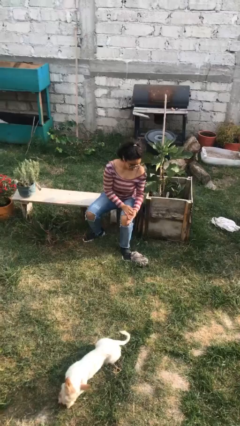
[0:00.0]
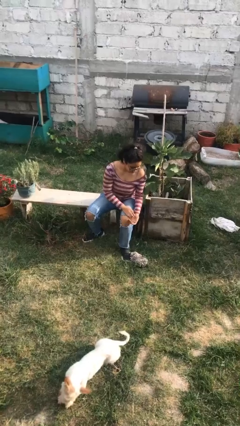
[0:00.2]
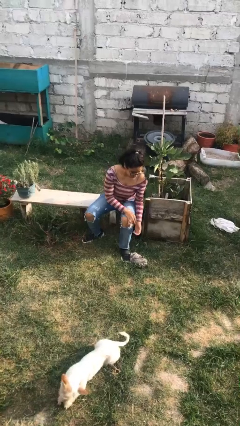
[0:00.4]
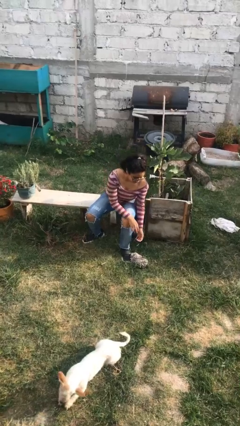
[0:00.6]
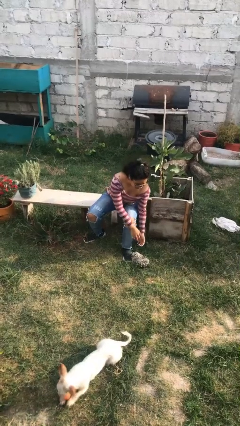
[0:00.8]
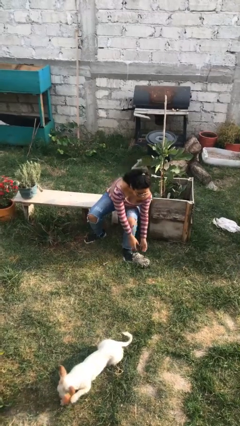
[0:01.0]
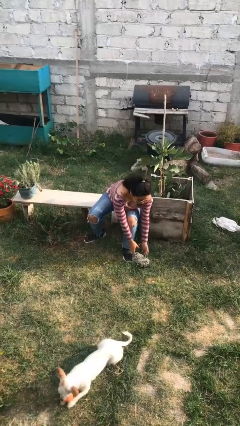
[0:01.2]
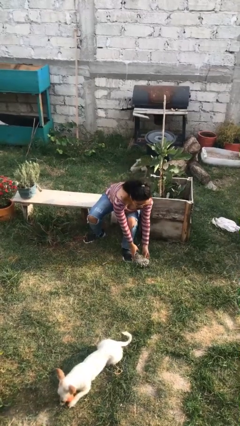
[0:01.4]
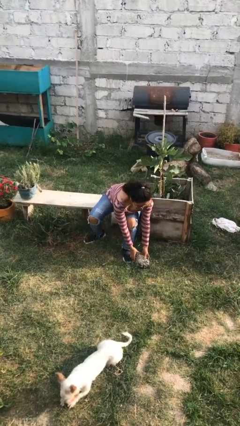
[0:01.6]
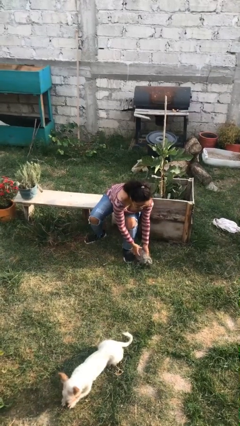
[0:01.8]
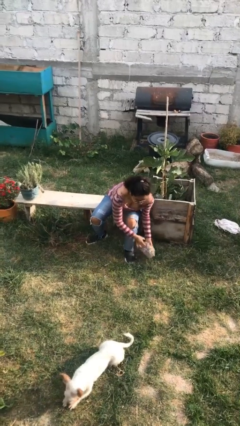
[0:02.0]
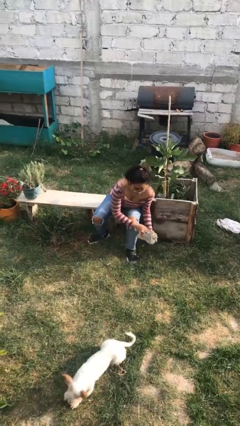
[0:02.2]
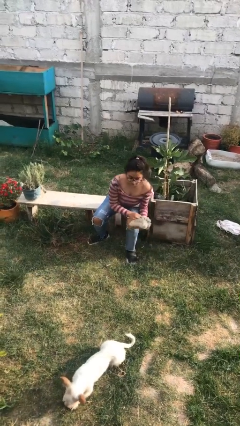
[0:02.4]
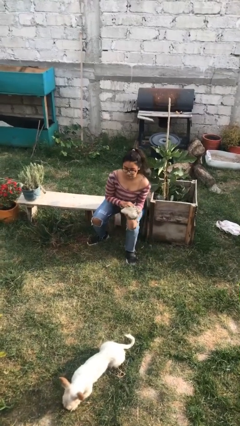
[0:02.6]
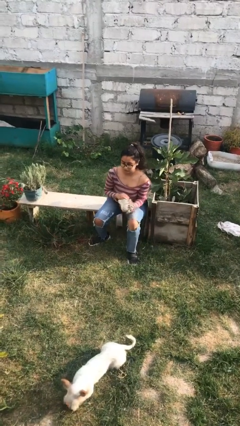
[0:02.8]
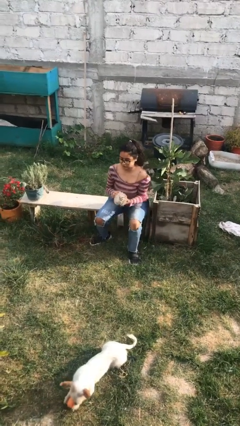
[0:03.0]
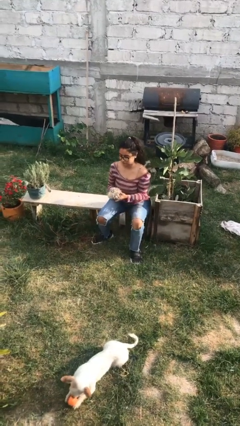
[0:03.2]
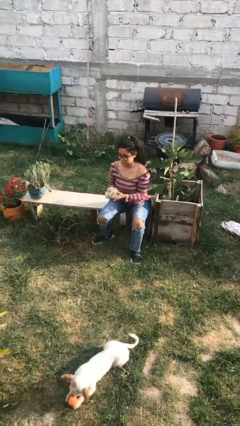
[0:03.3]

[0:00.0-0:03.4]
person picks up object from floor

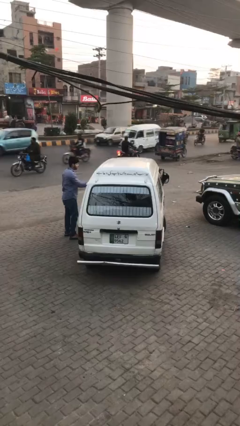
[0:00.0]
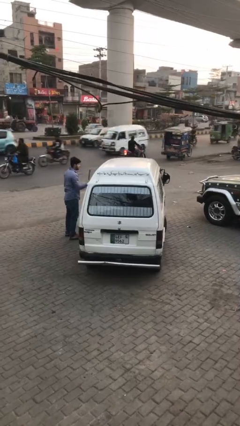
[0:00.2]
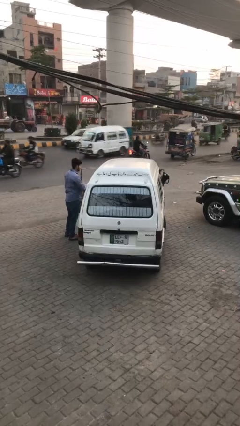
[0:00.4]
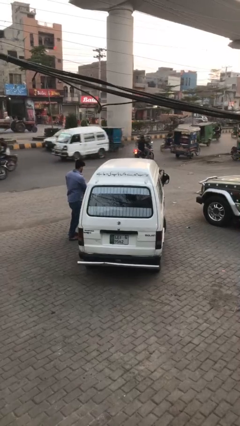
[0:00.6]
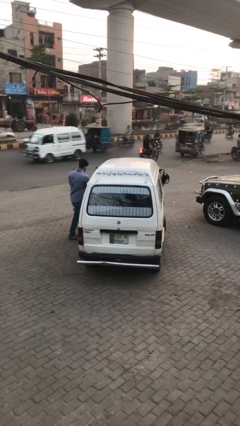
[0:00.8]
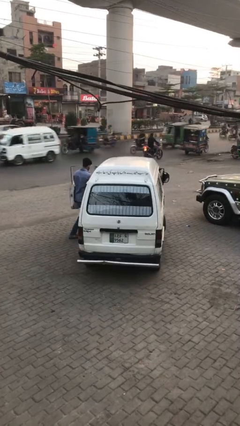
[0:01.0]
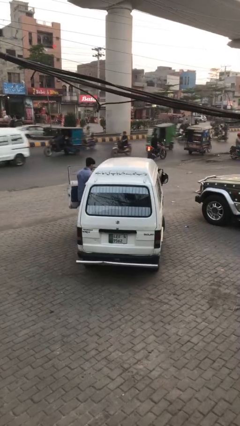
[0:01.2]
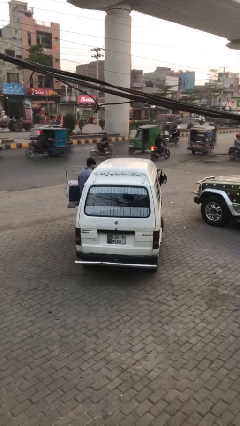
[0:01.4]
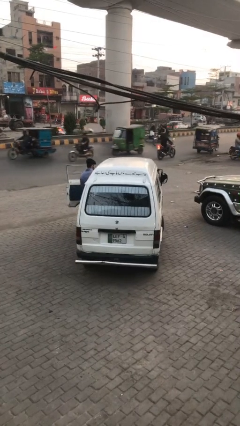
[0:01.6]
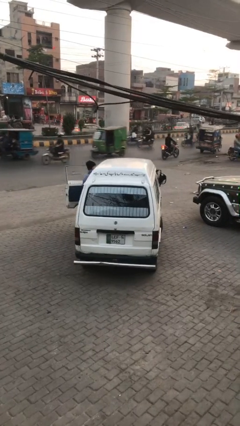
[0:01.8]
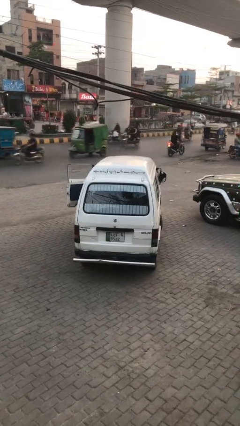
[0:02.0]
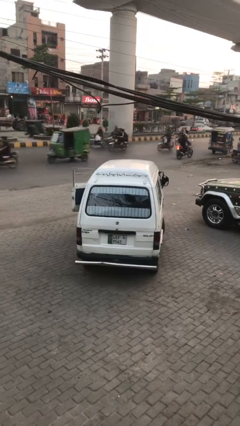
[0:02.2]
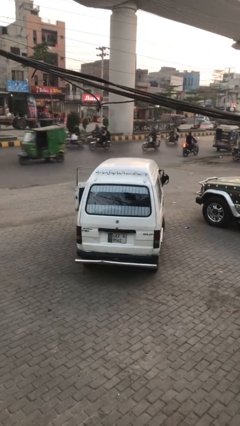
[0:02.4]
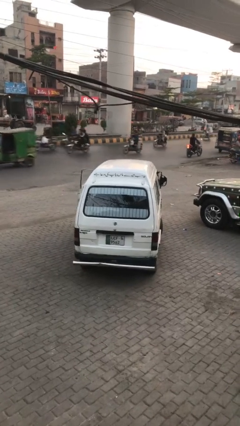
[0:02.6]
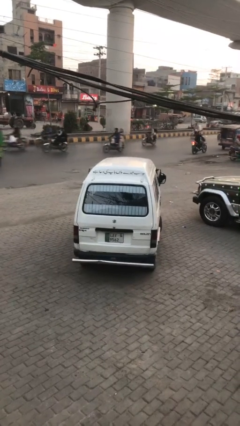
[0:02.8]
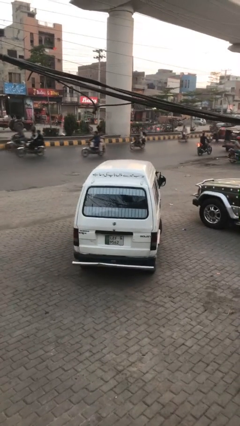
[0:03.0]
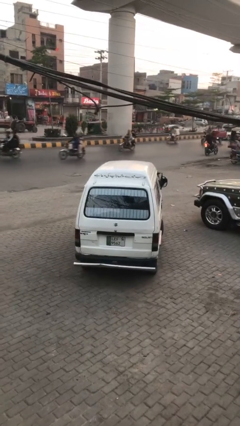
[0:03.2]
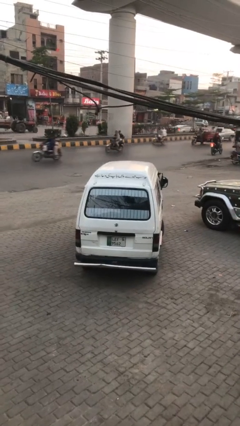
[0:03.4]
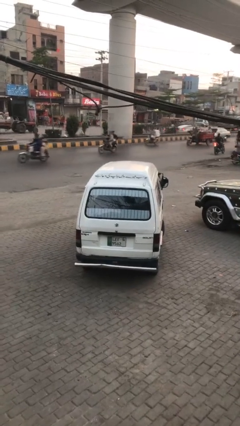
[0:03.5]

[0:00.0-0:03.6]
car picks up person

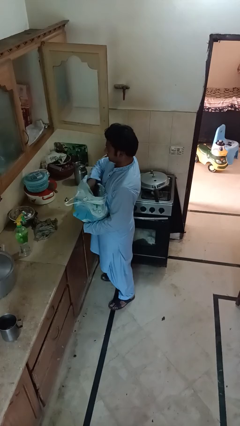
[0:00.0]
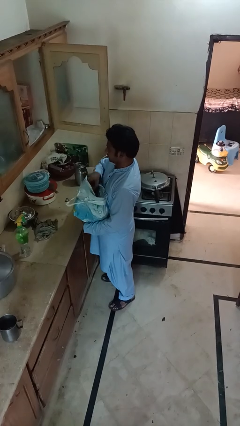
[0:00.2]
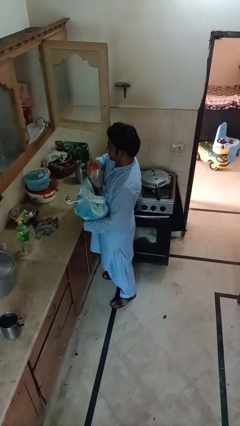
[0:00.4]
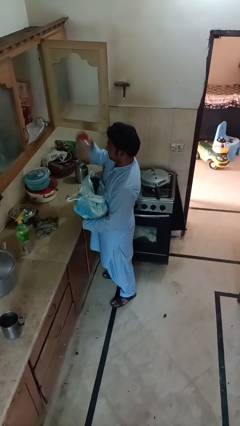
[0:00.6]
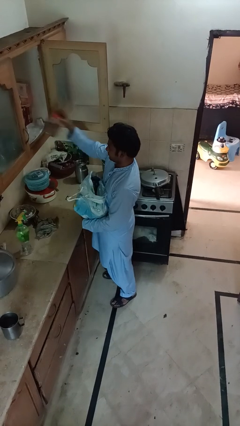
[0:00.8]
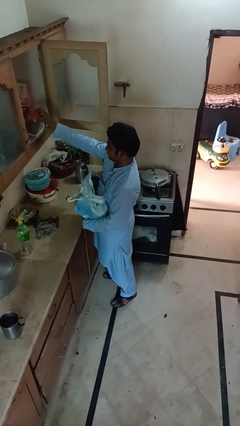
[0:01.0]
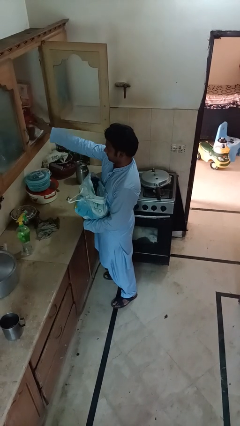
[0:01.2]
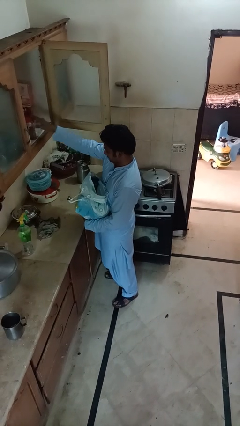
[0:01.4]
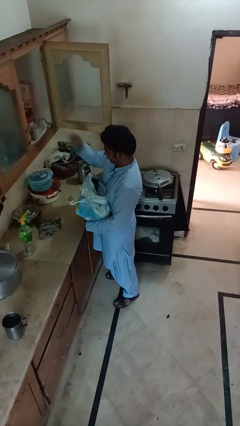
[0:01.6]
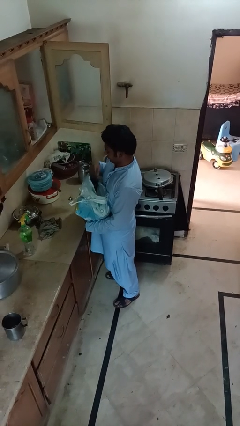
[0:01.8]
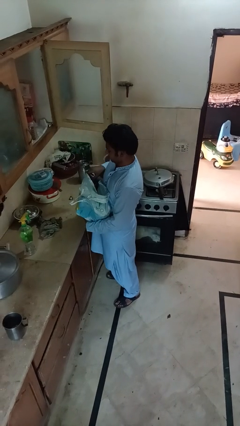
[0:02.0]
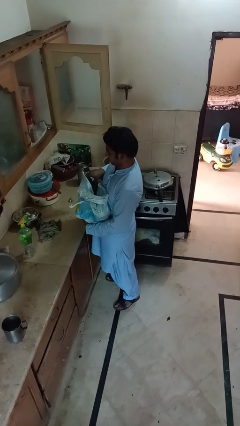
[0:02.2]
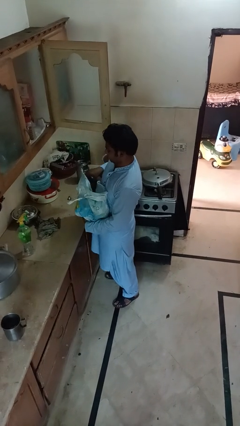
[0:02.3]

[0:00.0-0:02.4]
person loads groceries into cabinet

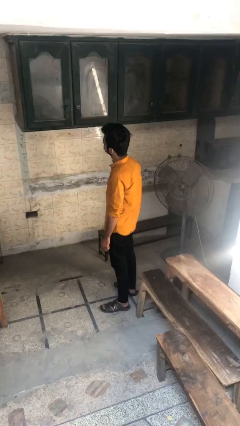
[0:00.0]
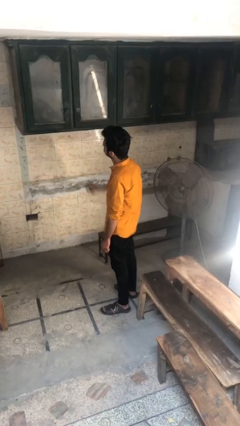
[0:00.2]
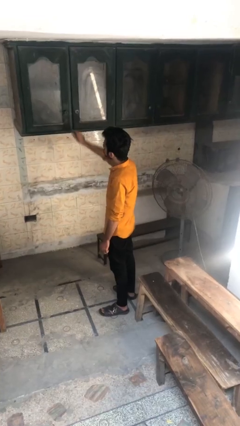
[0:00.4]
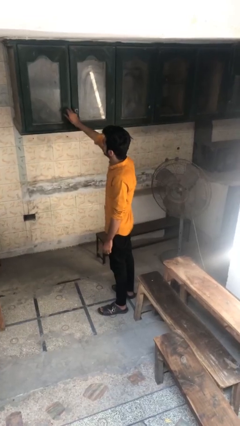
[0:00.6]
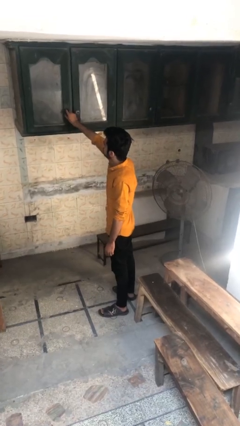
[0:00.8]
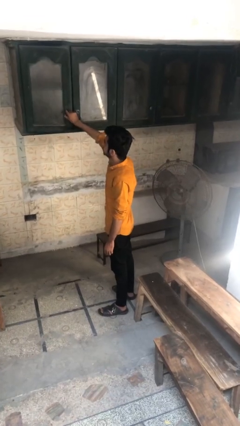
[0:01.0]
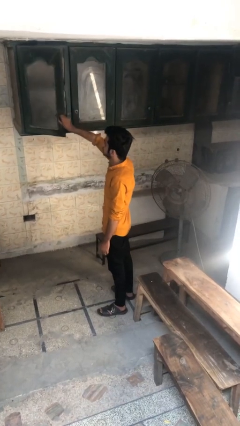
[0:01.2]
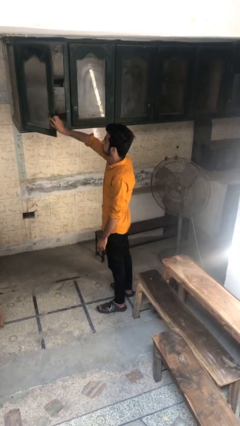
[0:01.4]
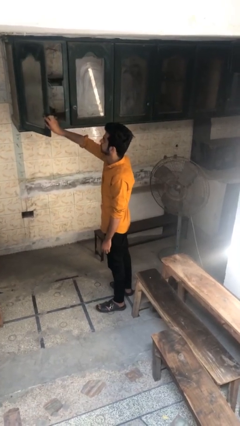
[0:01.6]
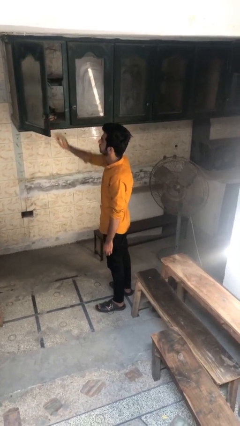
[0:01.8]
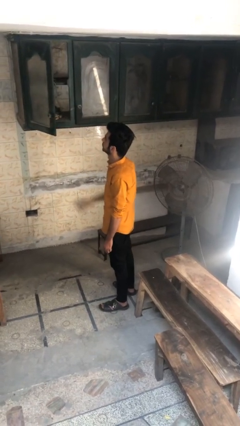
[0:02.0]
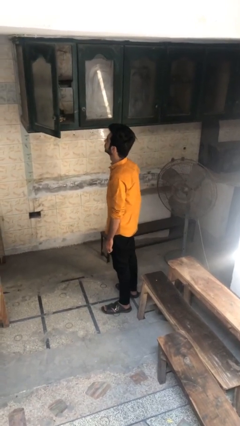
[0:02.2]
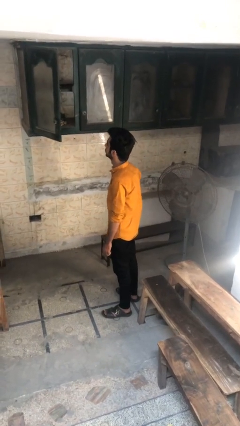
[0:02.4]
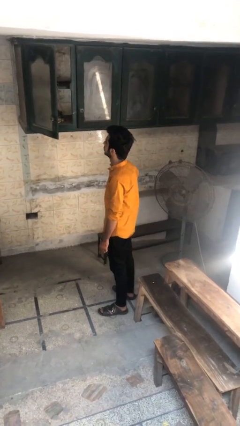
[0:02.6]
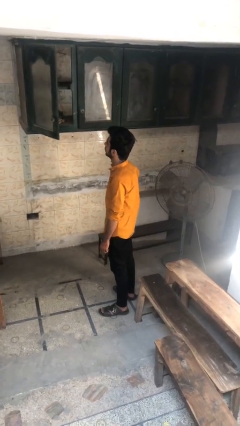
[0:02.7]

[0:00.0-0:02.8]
person opens cabinet

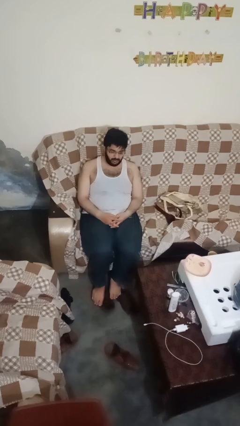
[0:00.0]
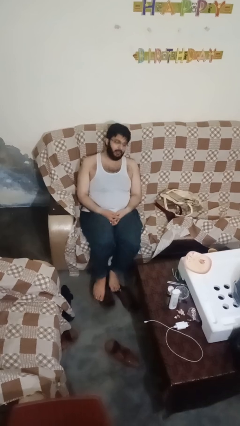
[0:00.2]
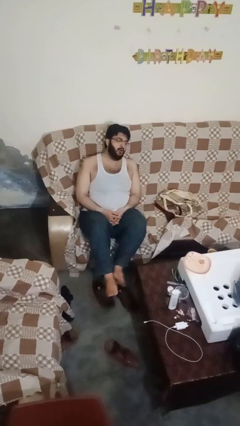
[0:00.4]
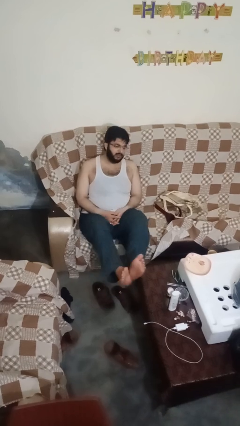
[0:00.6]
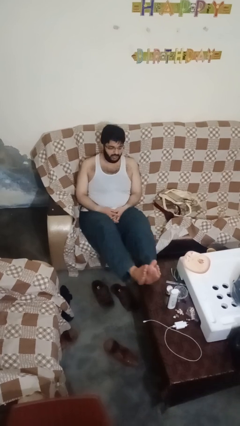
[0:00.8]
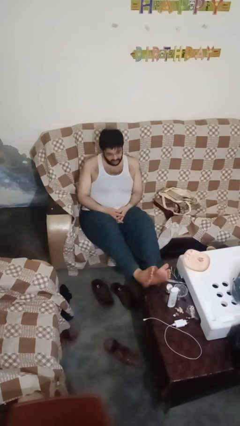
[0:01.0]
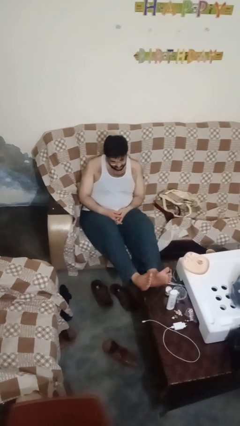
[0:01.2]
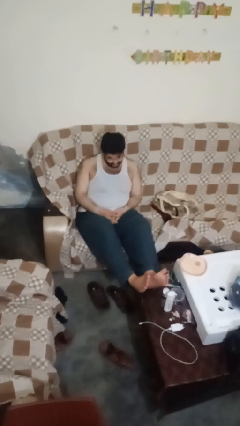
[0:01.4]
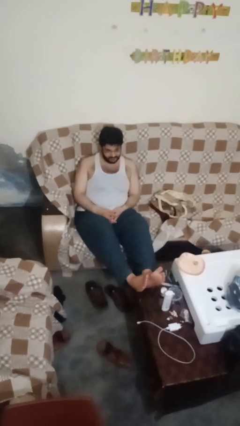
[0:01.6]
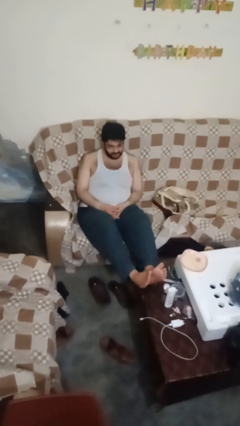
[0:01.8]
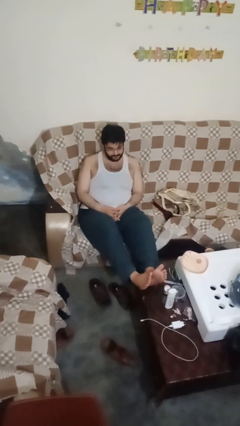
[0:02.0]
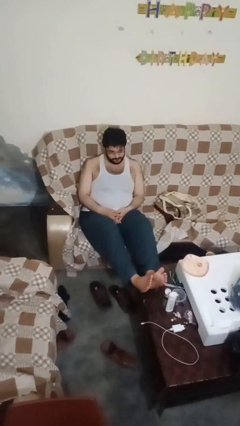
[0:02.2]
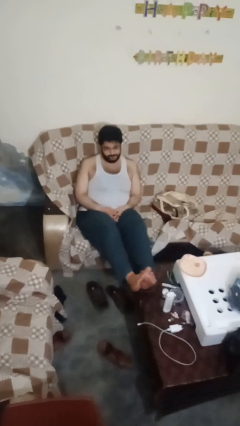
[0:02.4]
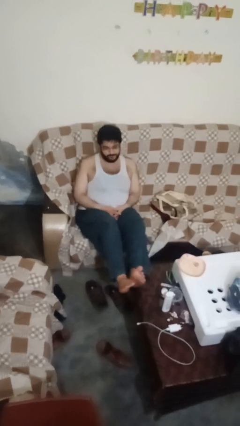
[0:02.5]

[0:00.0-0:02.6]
person puts feet up

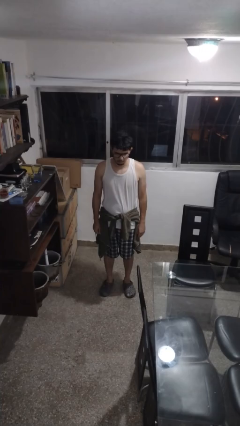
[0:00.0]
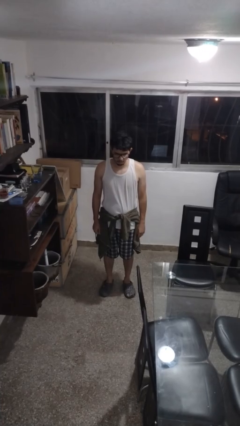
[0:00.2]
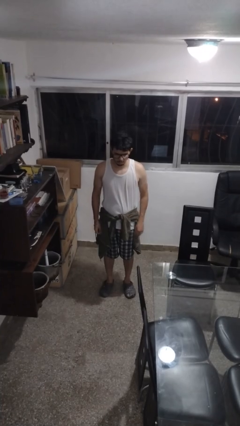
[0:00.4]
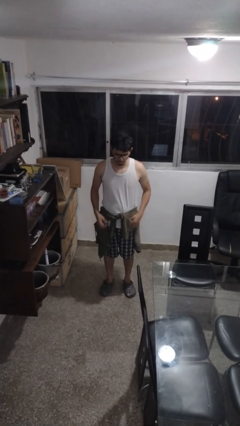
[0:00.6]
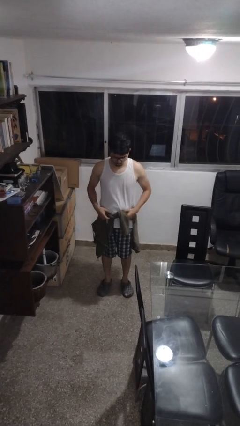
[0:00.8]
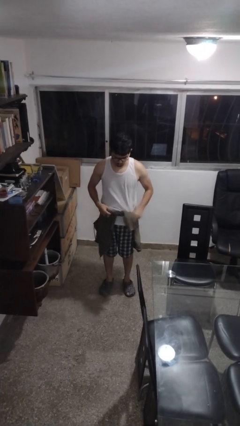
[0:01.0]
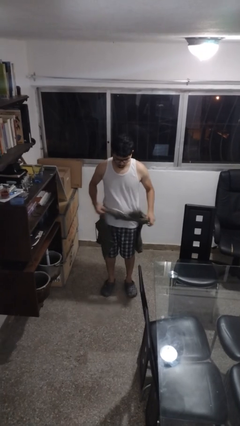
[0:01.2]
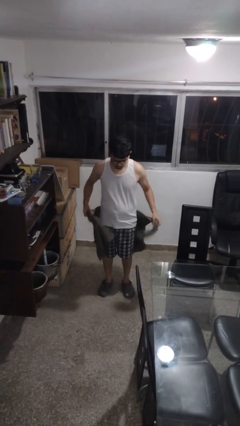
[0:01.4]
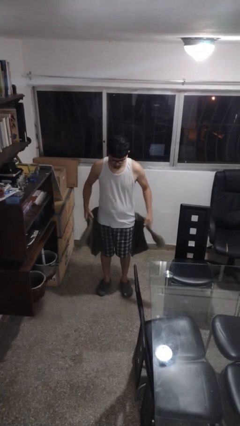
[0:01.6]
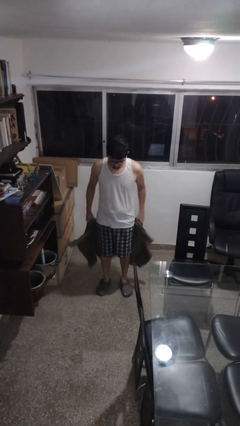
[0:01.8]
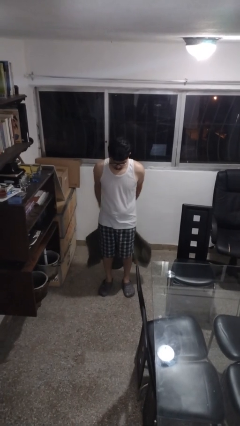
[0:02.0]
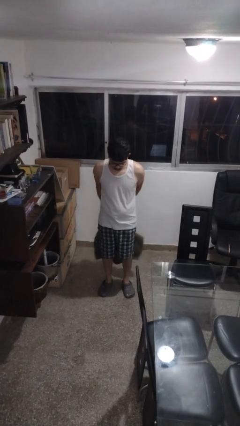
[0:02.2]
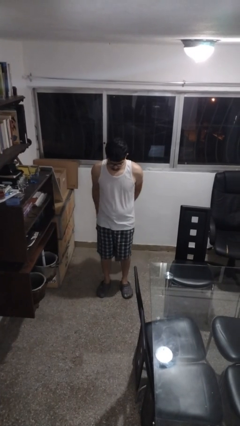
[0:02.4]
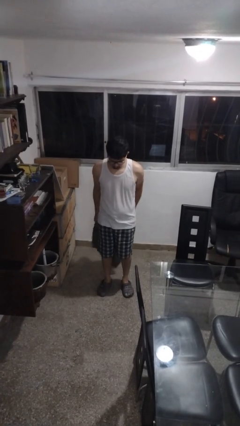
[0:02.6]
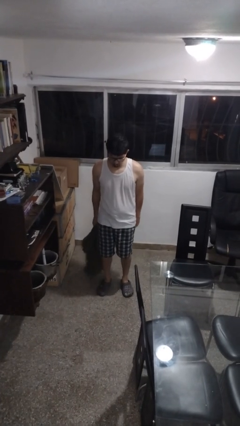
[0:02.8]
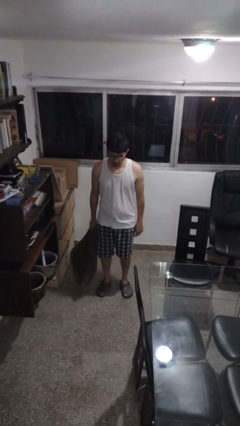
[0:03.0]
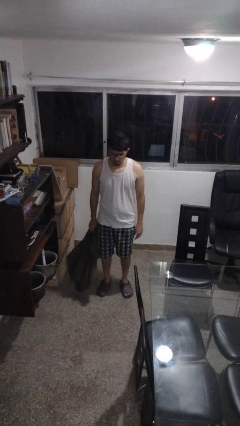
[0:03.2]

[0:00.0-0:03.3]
person unties jacket around waist
